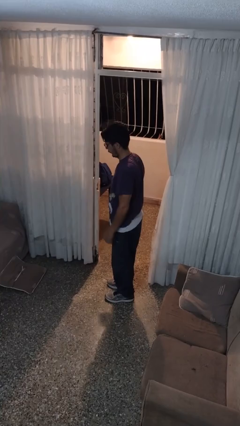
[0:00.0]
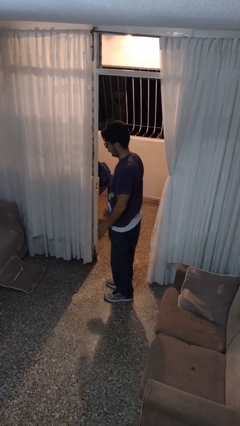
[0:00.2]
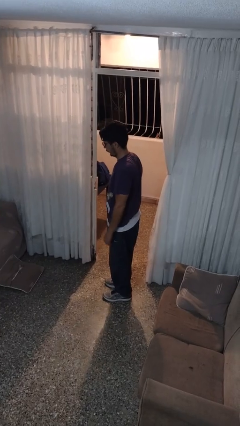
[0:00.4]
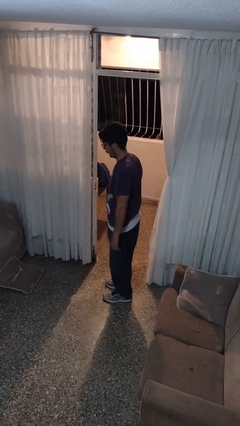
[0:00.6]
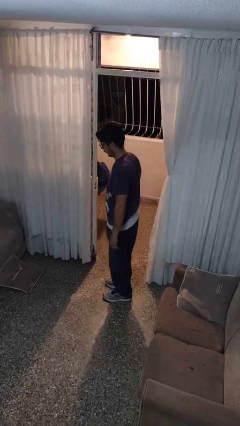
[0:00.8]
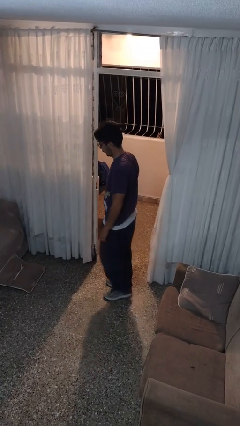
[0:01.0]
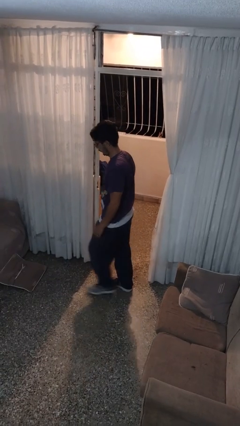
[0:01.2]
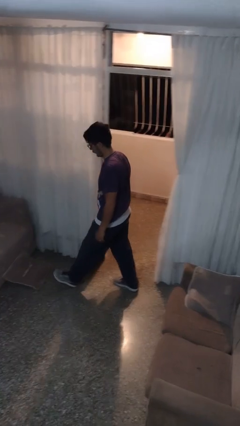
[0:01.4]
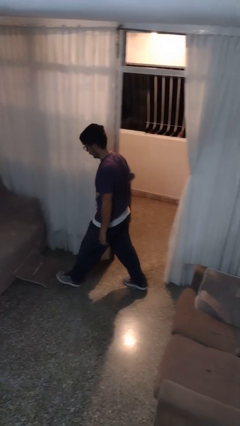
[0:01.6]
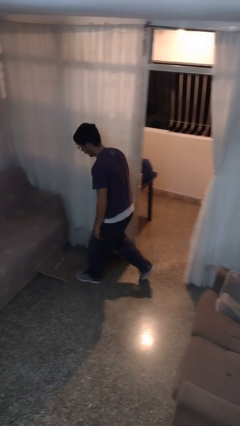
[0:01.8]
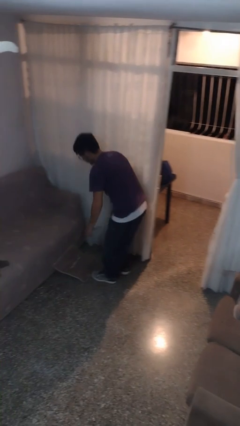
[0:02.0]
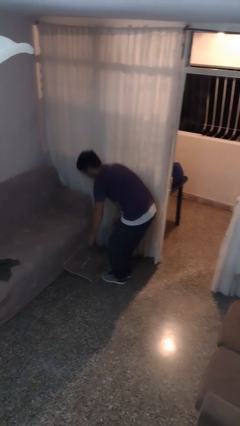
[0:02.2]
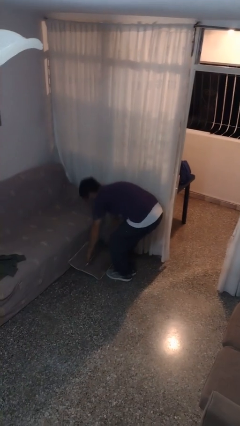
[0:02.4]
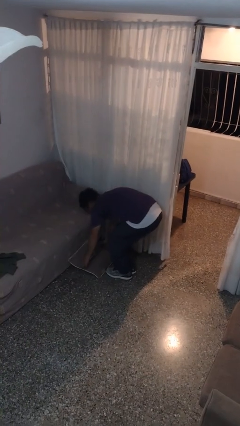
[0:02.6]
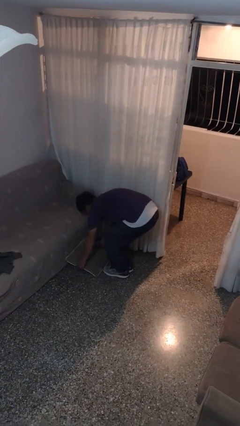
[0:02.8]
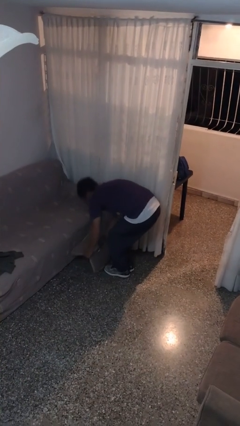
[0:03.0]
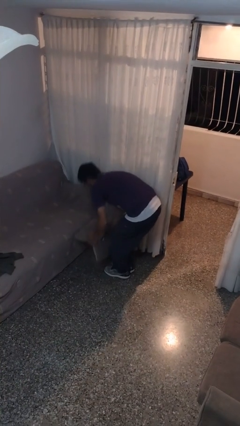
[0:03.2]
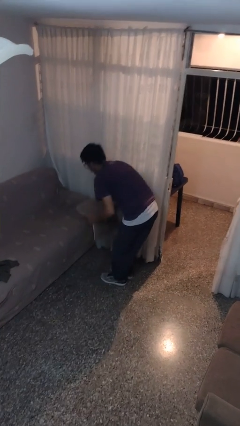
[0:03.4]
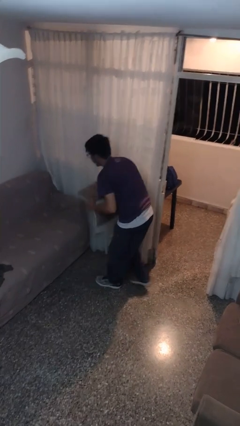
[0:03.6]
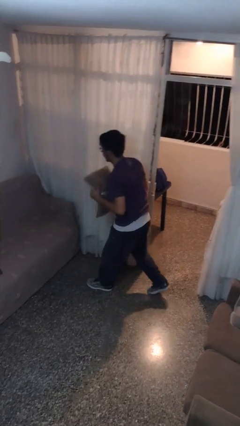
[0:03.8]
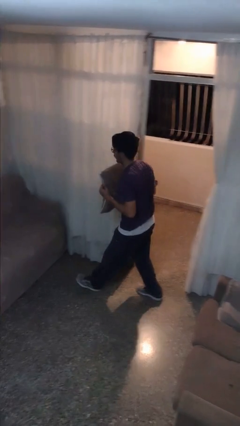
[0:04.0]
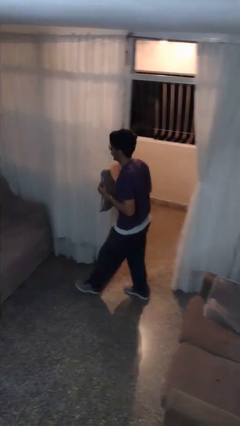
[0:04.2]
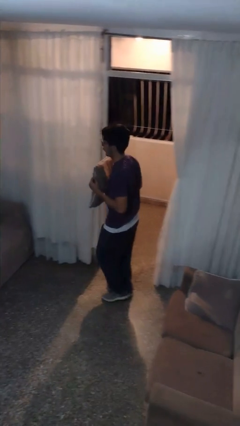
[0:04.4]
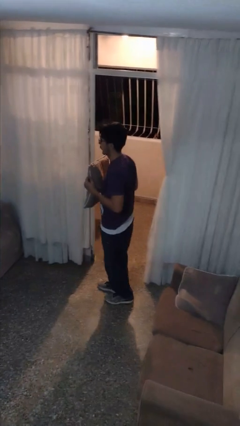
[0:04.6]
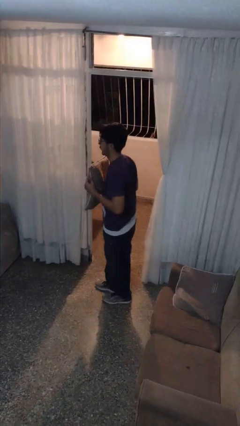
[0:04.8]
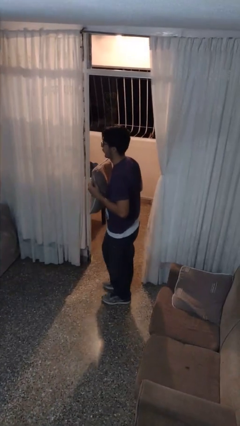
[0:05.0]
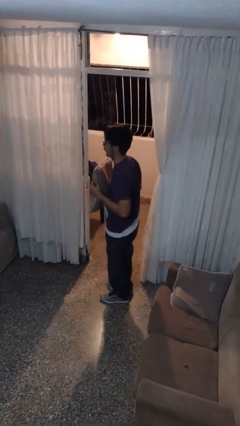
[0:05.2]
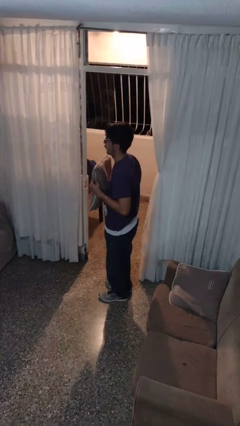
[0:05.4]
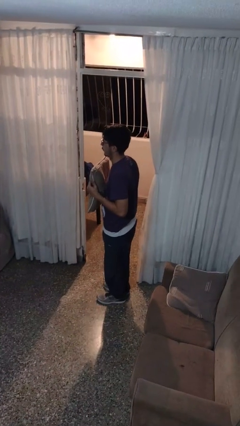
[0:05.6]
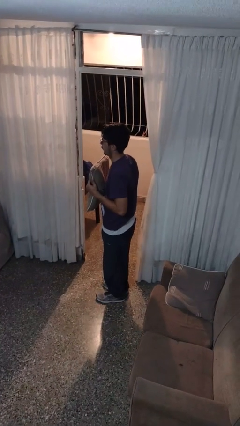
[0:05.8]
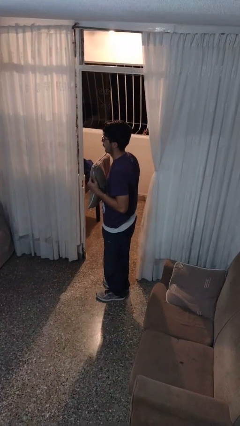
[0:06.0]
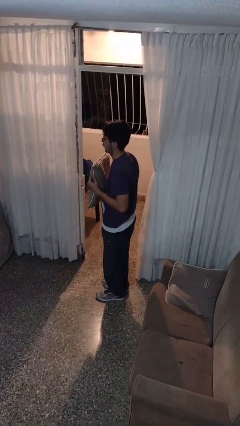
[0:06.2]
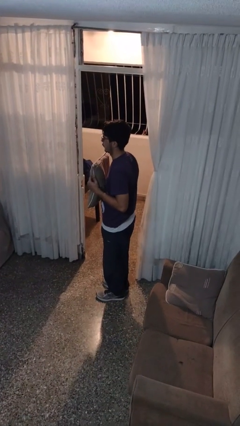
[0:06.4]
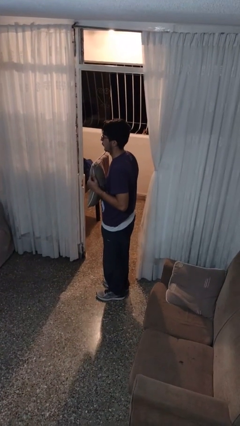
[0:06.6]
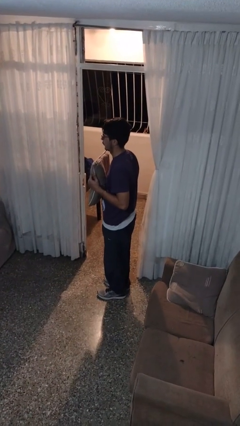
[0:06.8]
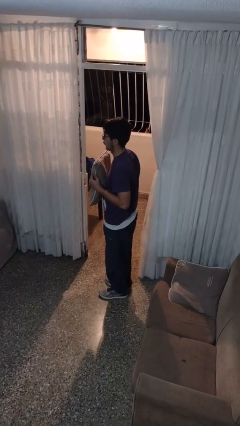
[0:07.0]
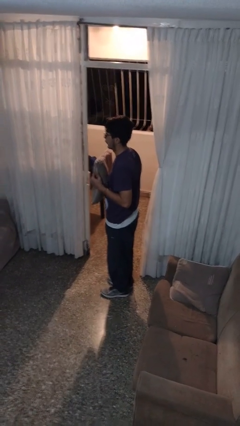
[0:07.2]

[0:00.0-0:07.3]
person picks up object from floor

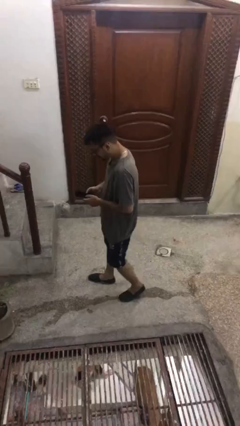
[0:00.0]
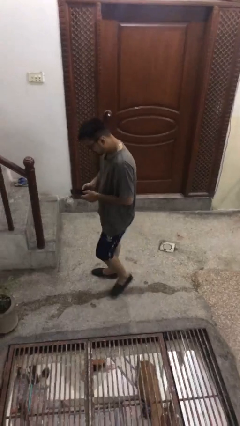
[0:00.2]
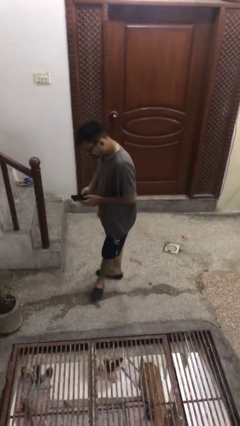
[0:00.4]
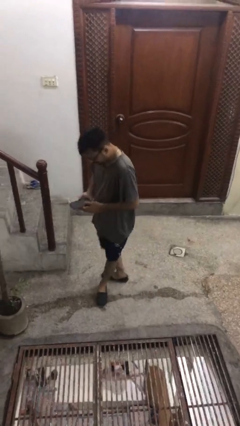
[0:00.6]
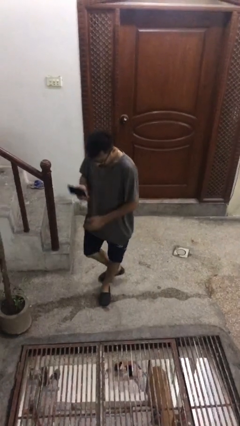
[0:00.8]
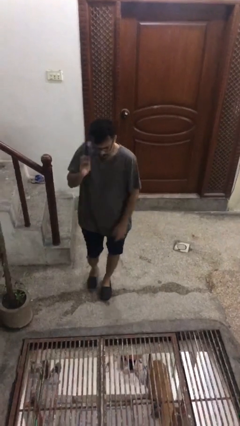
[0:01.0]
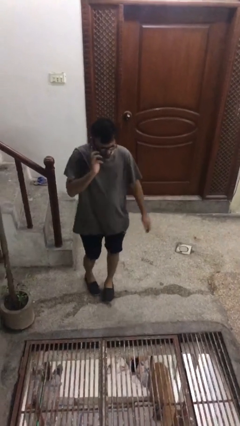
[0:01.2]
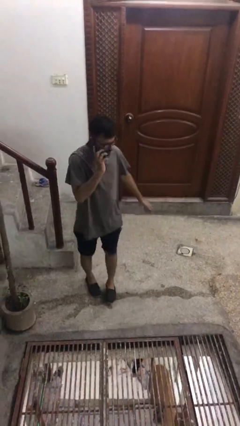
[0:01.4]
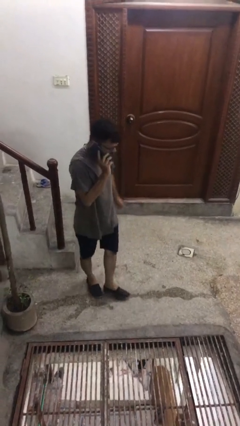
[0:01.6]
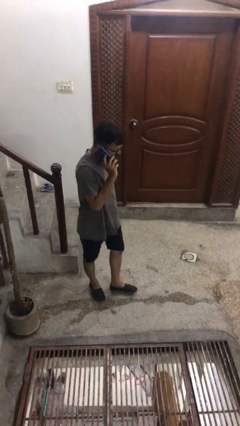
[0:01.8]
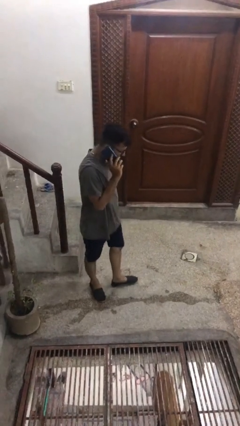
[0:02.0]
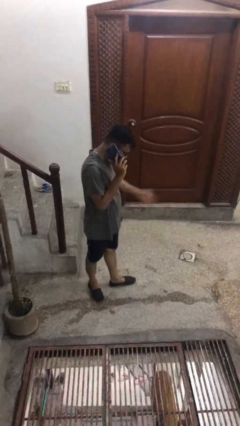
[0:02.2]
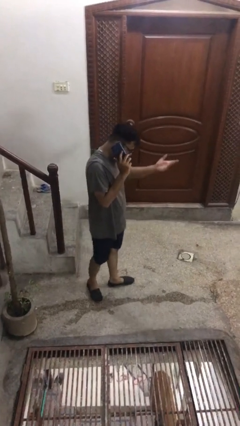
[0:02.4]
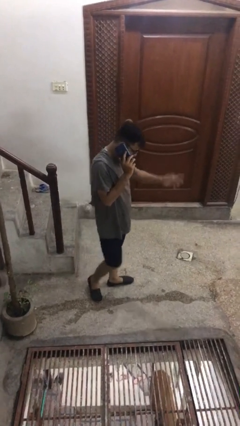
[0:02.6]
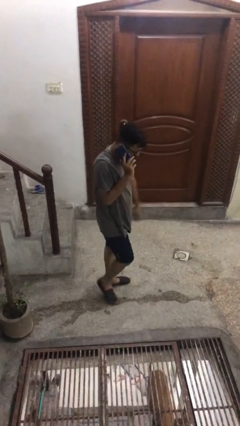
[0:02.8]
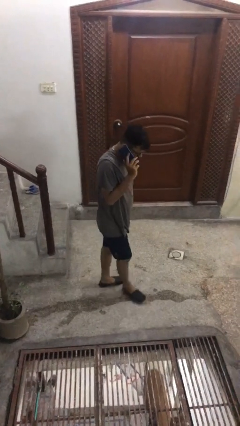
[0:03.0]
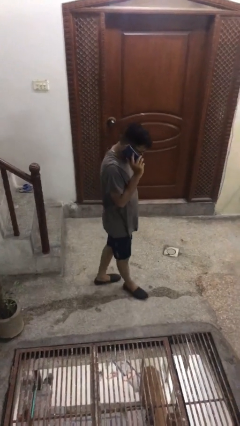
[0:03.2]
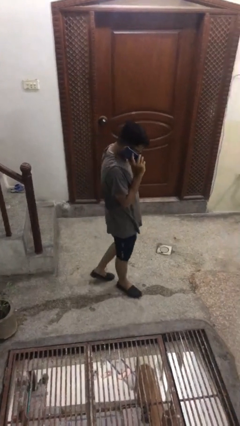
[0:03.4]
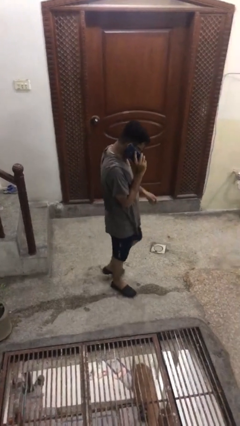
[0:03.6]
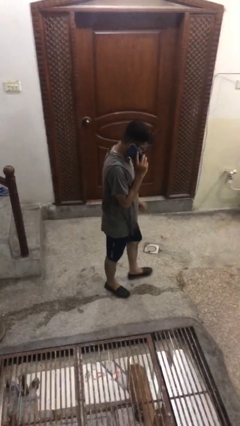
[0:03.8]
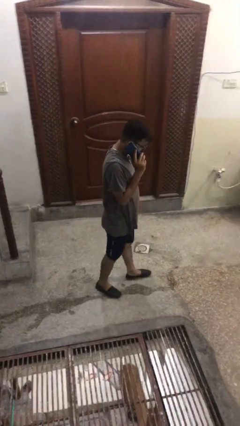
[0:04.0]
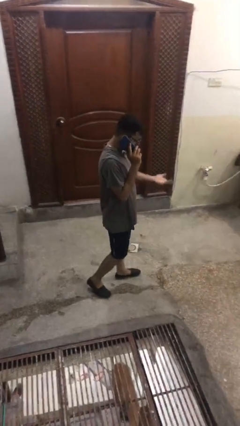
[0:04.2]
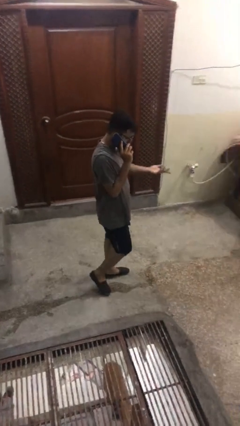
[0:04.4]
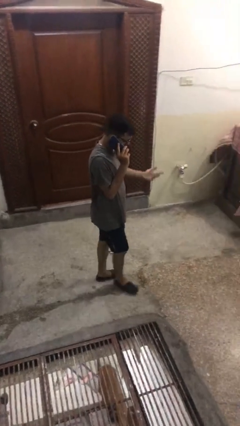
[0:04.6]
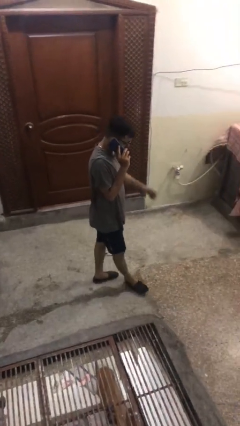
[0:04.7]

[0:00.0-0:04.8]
person talks on phone

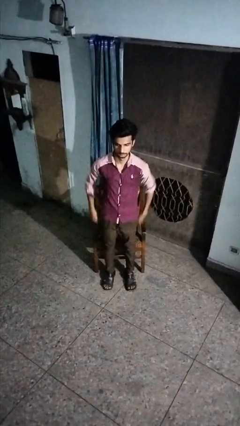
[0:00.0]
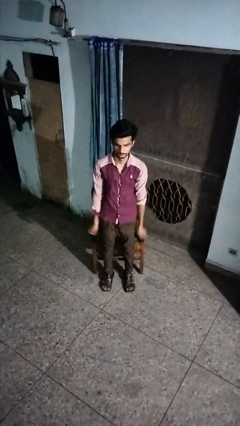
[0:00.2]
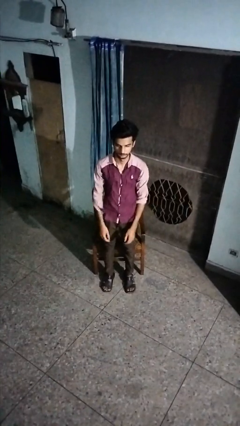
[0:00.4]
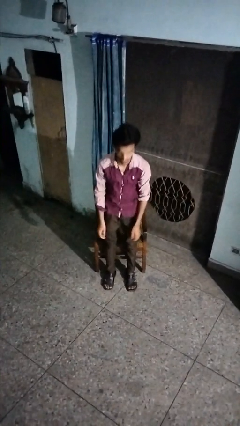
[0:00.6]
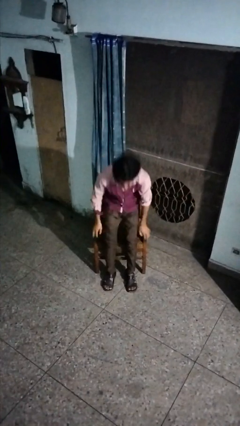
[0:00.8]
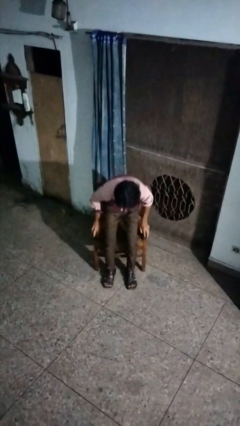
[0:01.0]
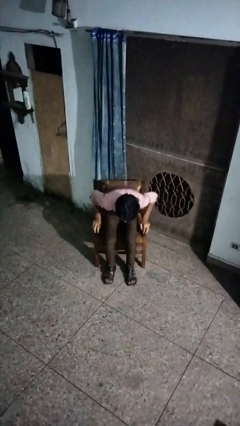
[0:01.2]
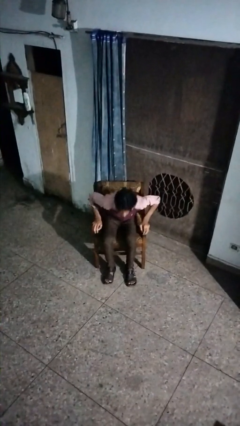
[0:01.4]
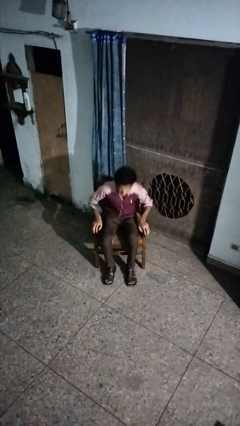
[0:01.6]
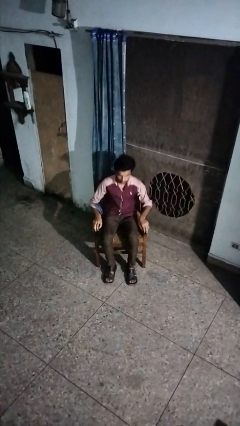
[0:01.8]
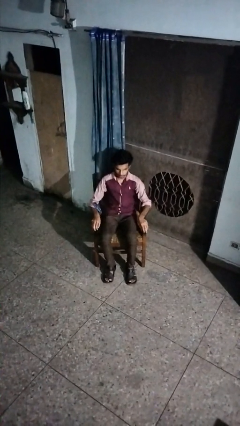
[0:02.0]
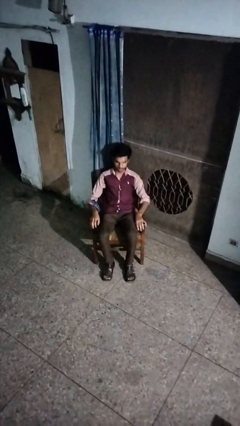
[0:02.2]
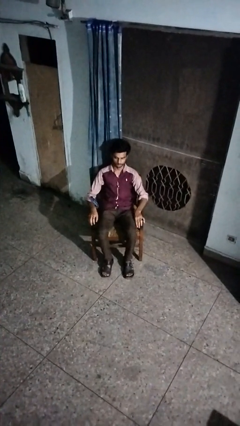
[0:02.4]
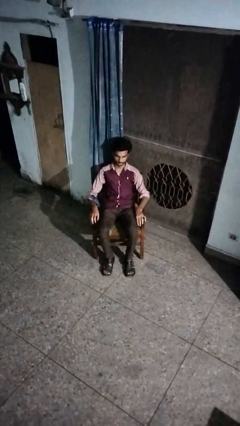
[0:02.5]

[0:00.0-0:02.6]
person sits down

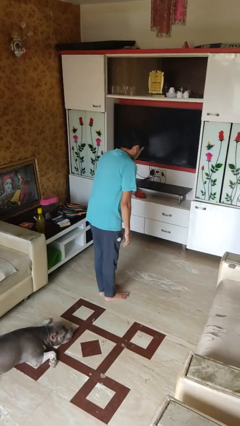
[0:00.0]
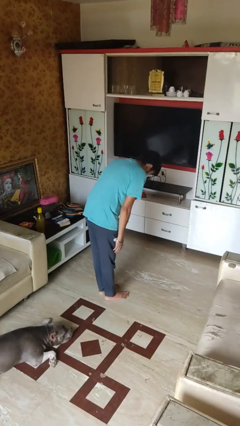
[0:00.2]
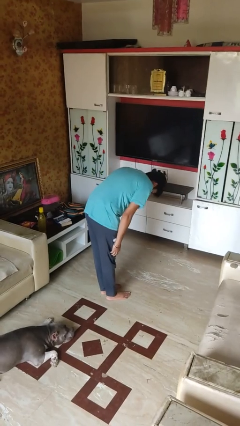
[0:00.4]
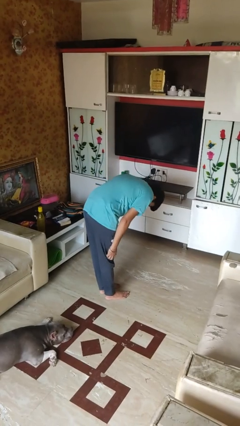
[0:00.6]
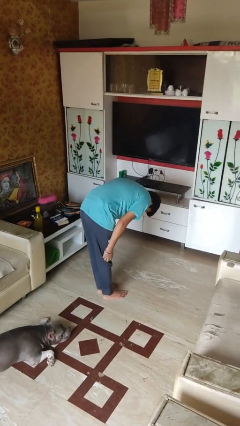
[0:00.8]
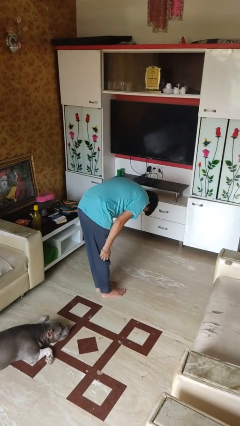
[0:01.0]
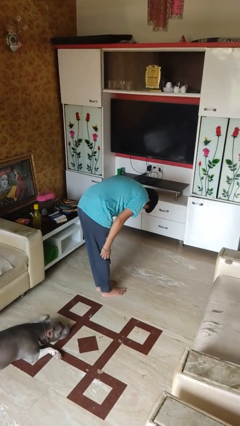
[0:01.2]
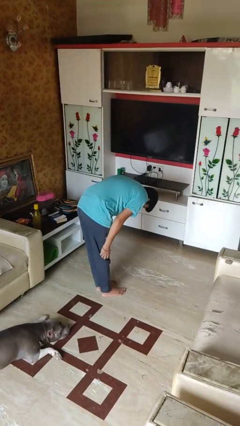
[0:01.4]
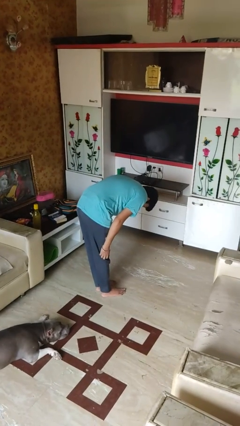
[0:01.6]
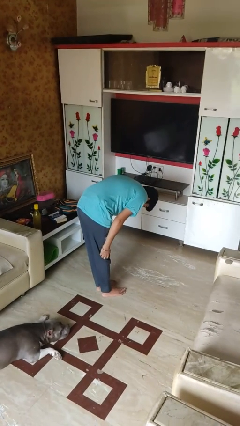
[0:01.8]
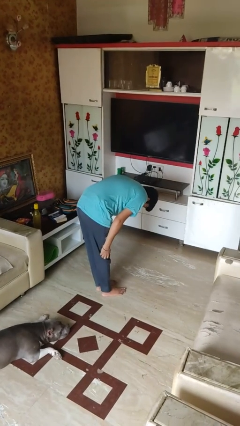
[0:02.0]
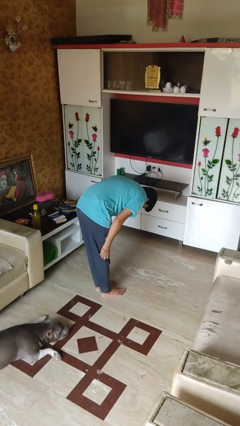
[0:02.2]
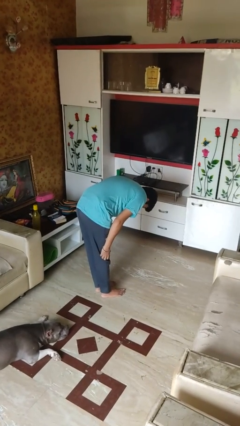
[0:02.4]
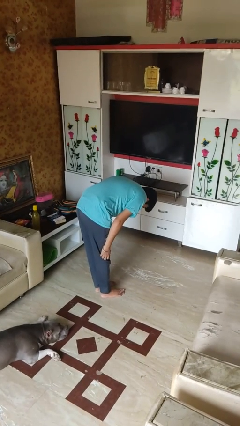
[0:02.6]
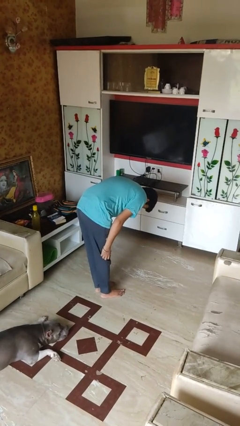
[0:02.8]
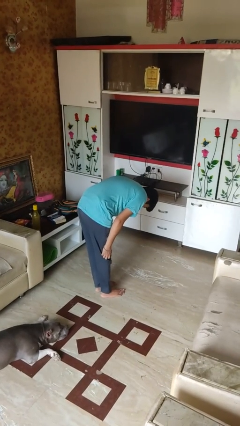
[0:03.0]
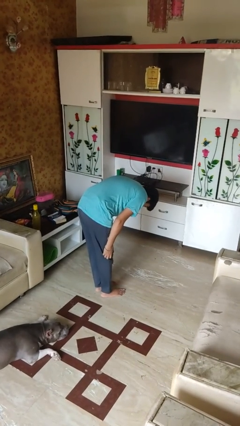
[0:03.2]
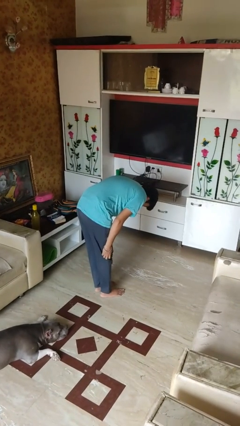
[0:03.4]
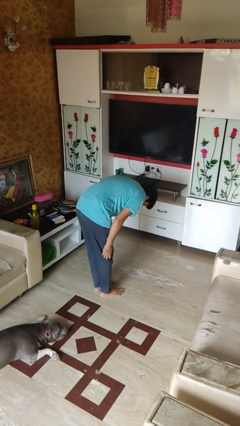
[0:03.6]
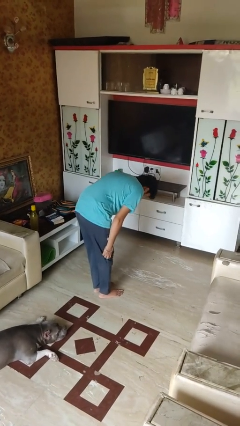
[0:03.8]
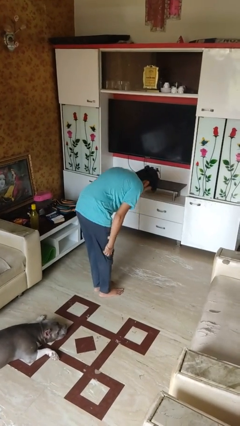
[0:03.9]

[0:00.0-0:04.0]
person bows
